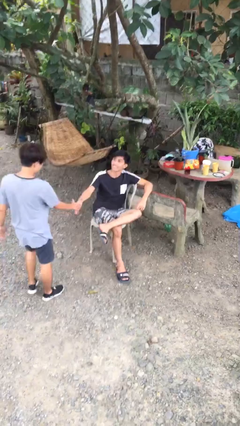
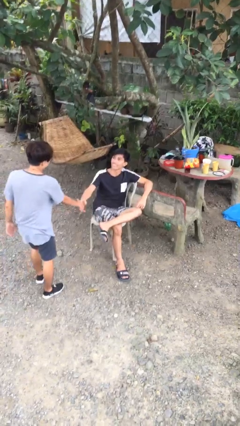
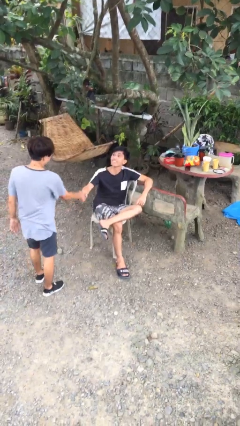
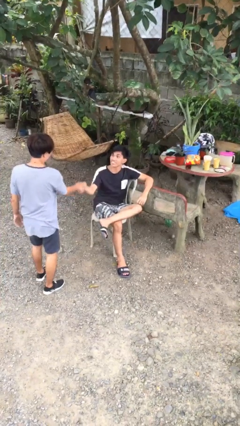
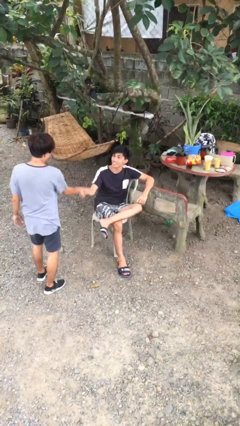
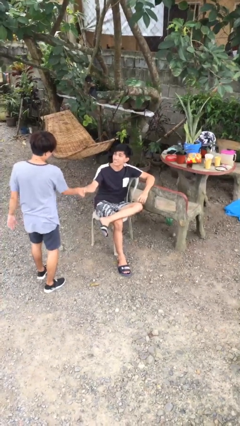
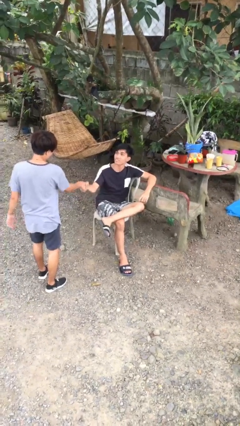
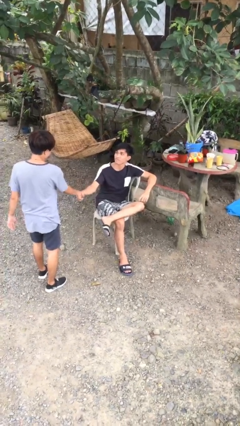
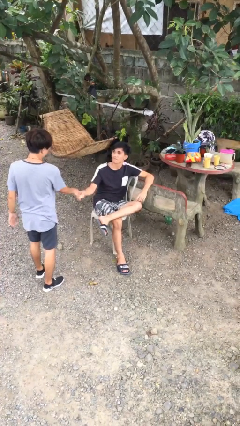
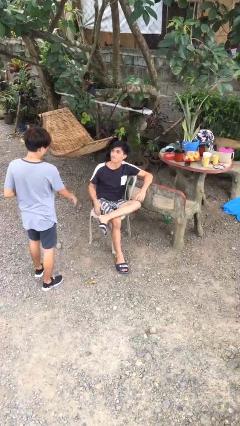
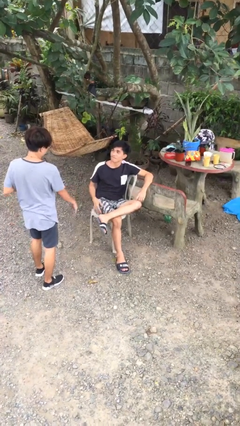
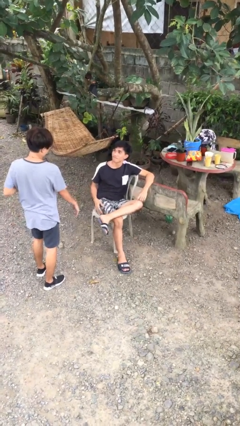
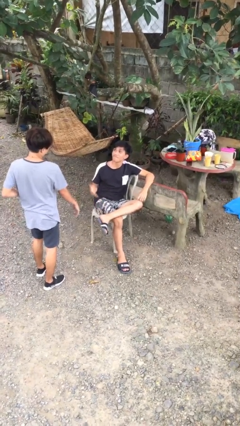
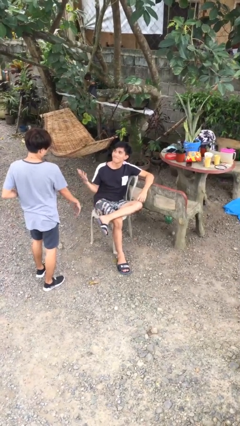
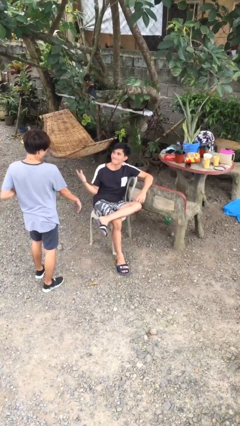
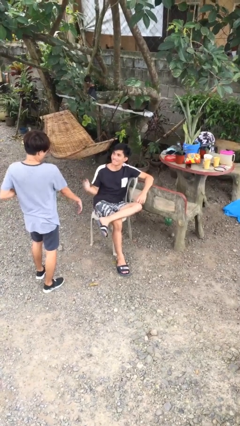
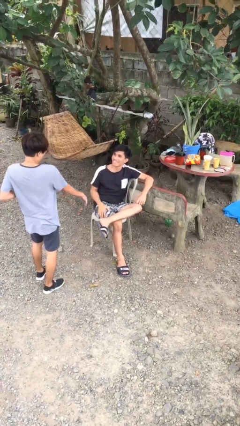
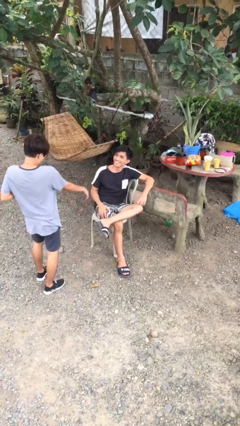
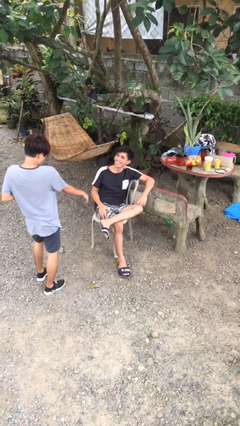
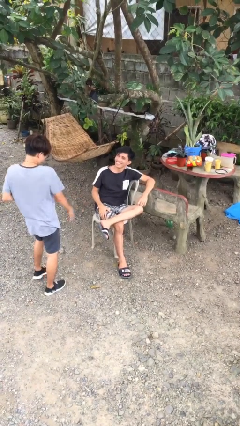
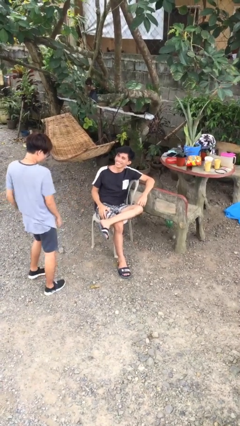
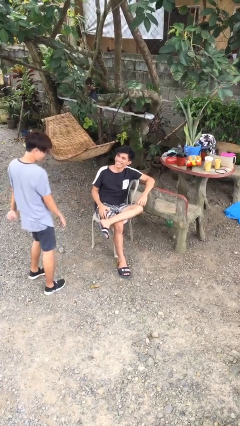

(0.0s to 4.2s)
person shakes hand

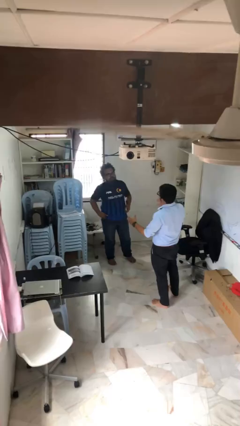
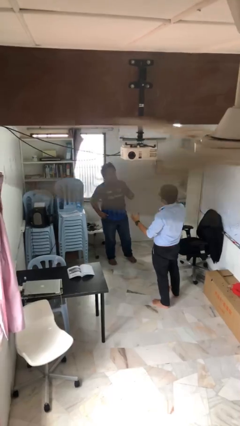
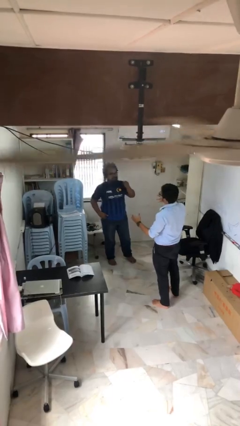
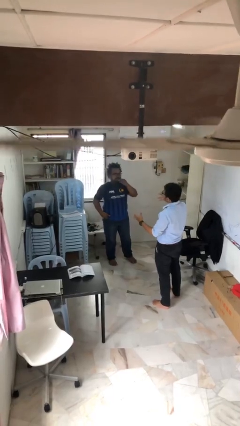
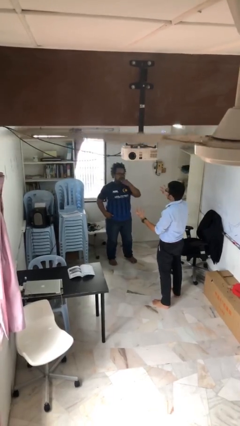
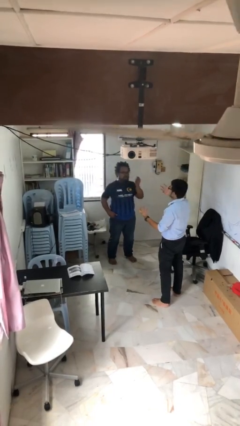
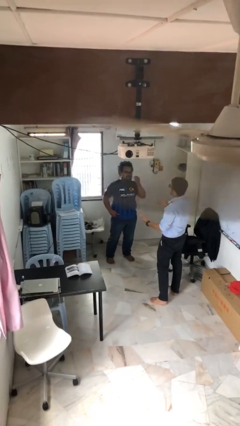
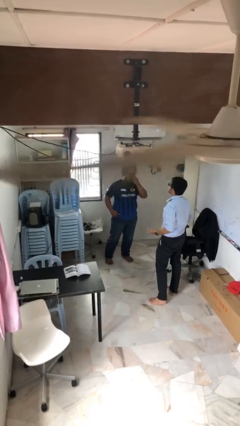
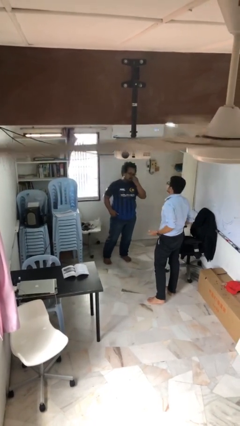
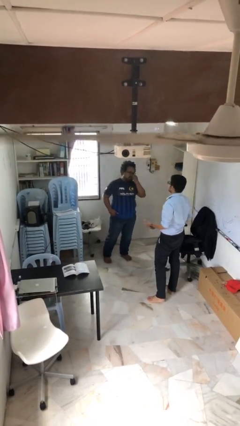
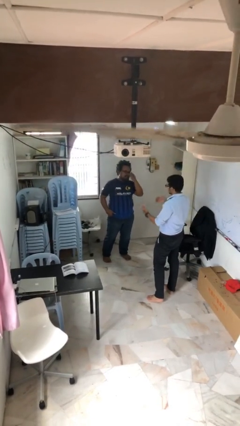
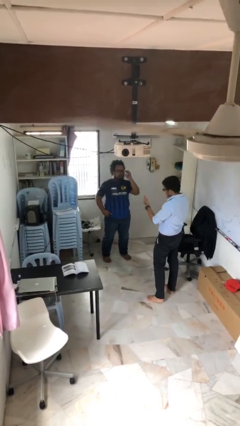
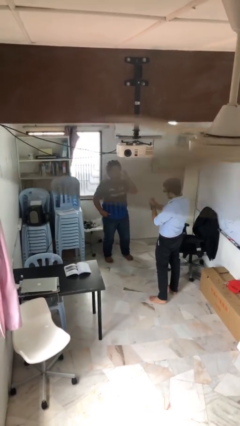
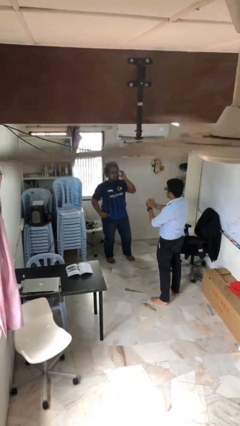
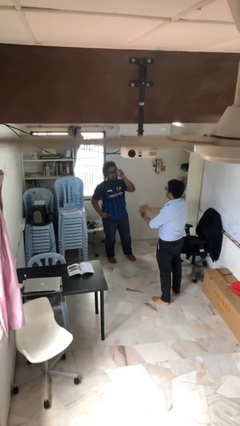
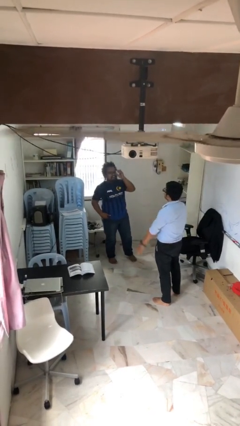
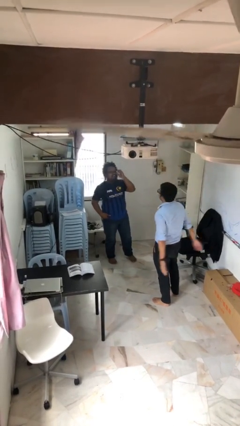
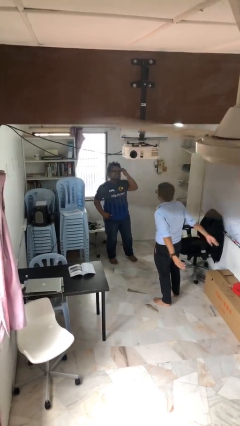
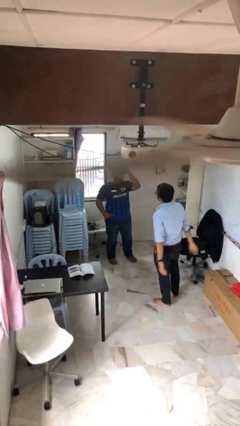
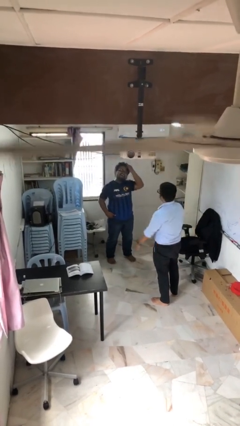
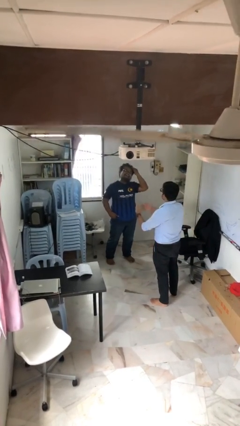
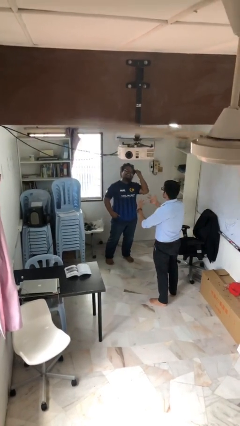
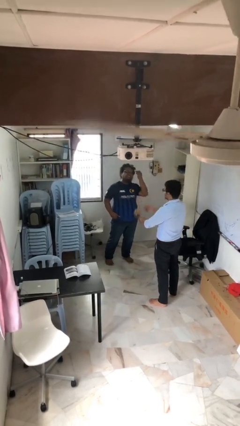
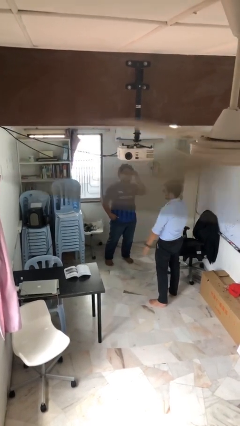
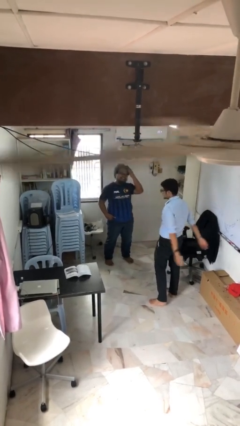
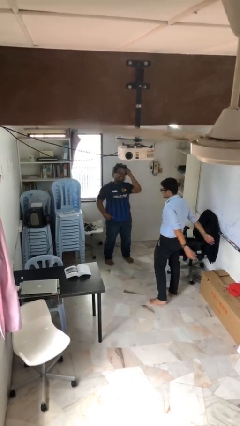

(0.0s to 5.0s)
person talks to person

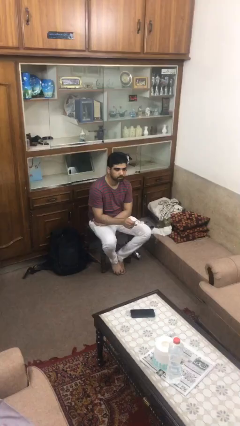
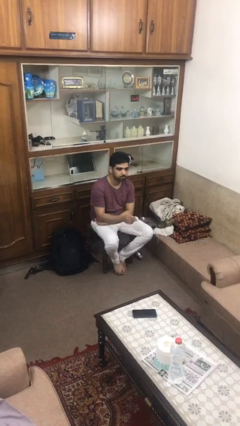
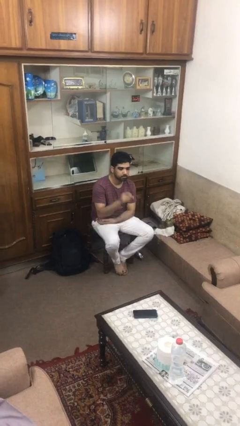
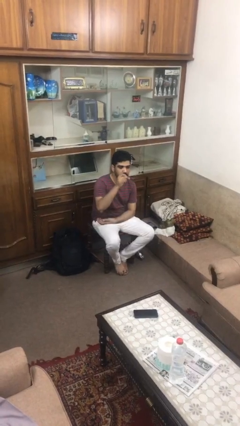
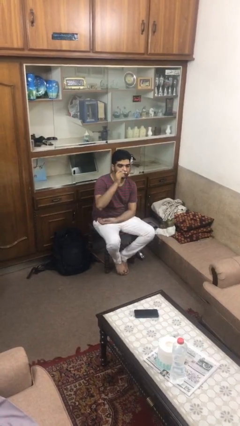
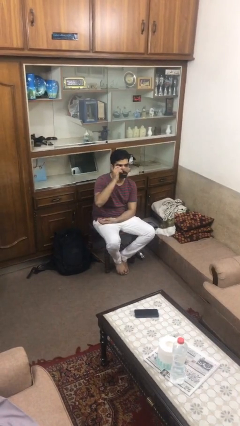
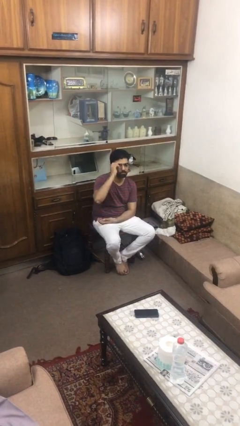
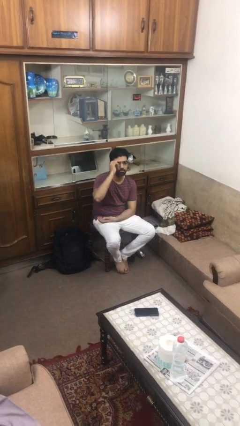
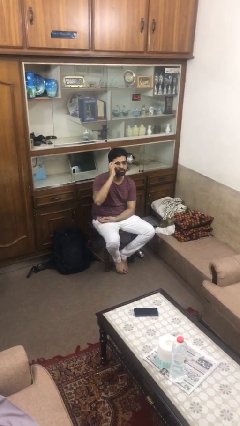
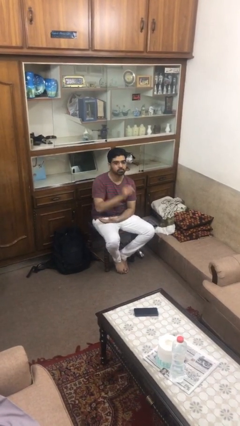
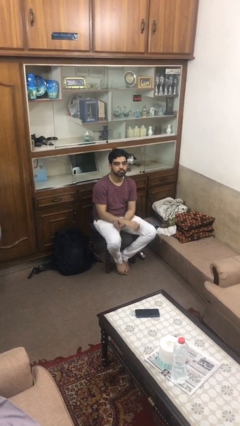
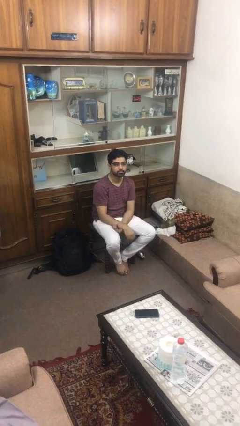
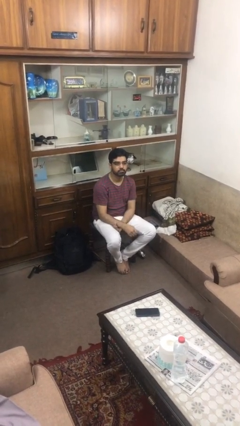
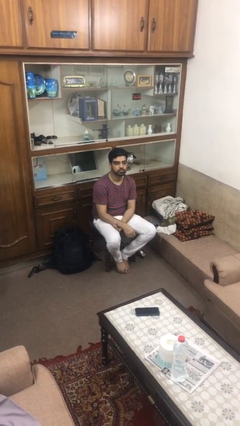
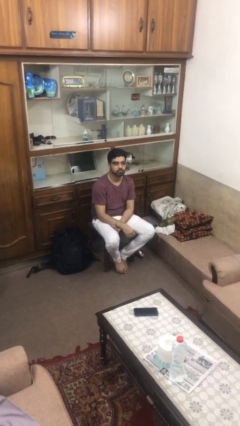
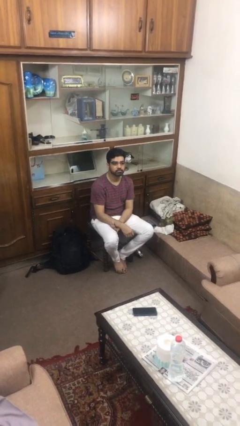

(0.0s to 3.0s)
person puts on glasses

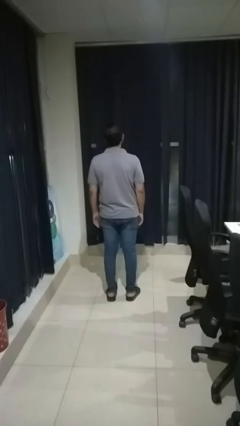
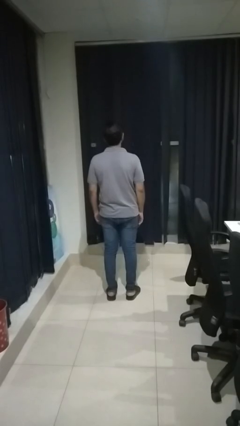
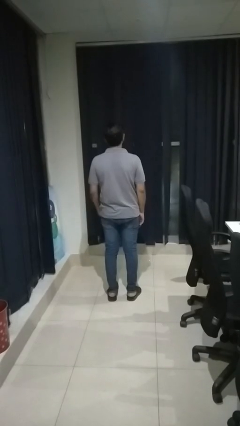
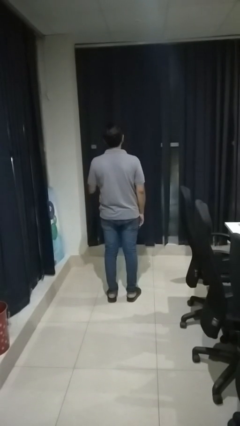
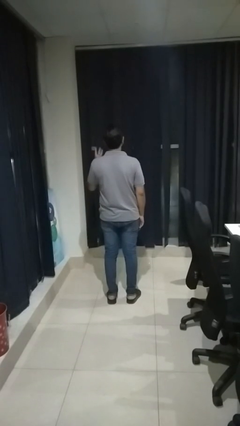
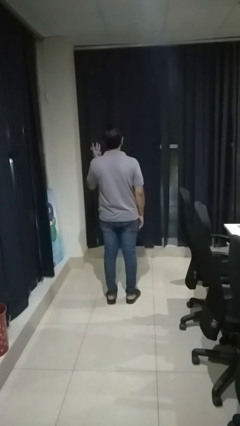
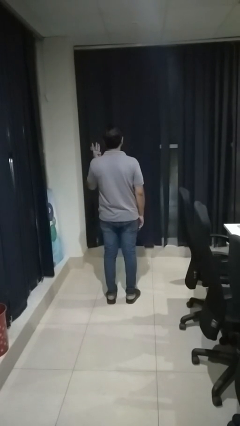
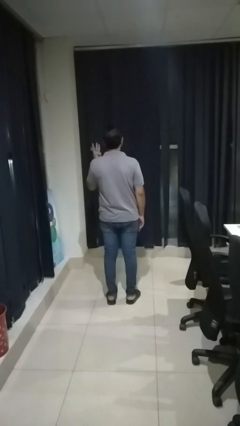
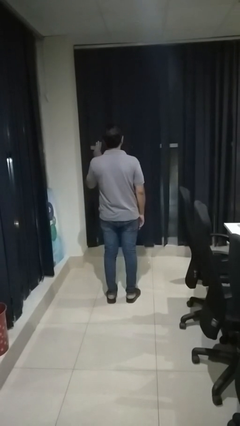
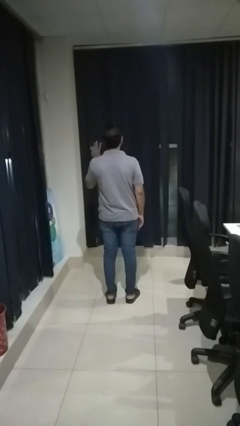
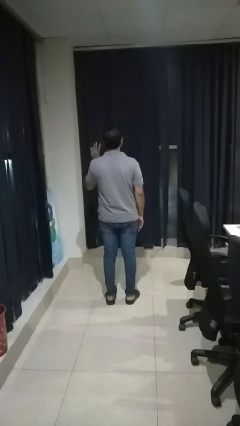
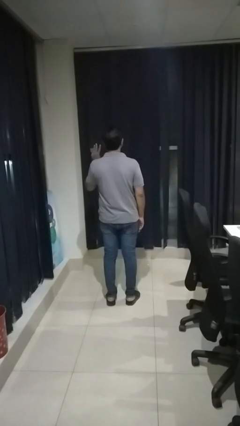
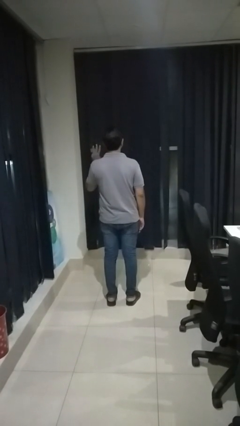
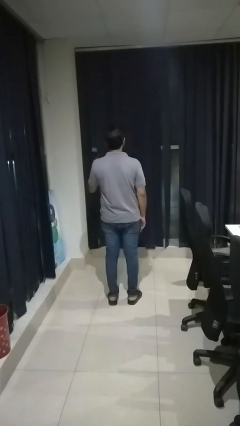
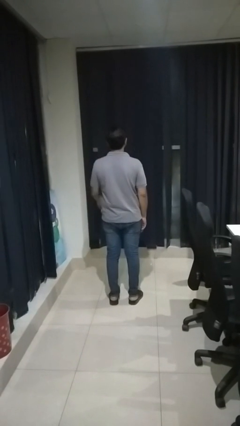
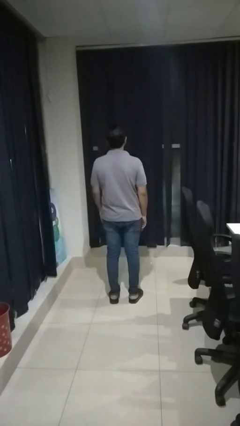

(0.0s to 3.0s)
person gestures number three

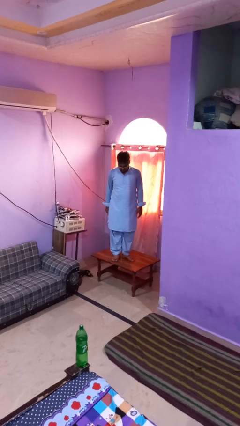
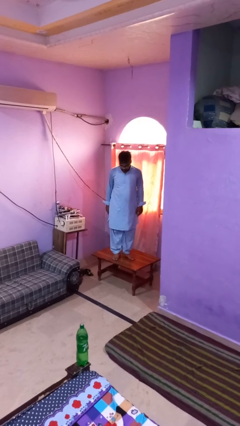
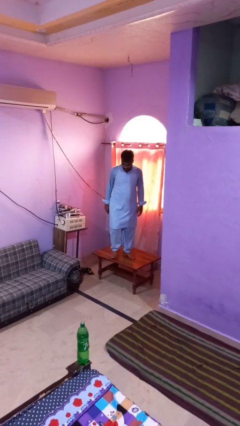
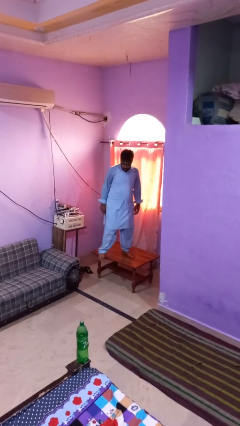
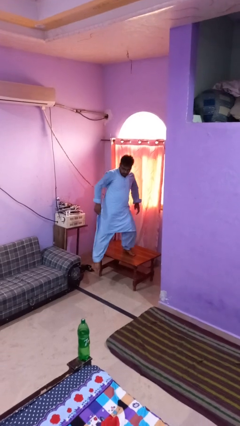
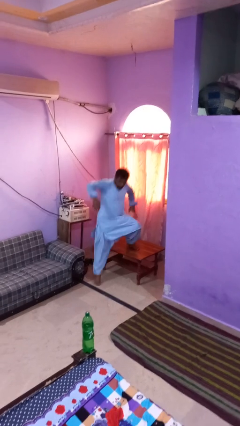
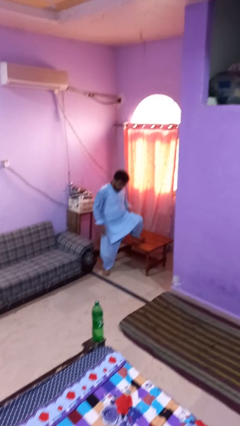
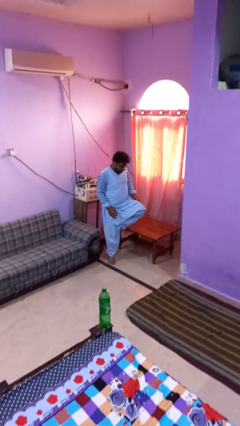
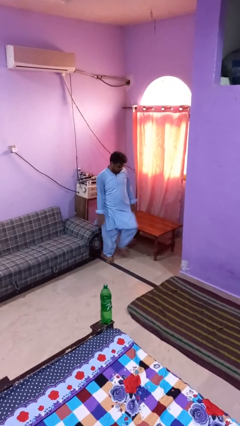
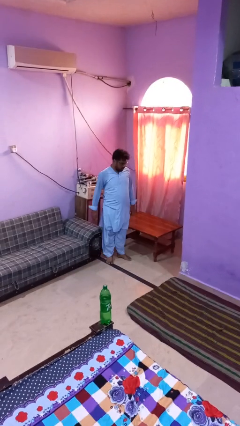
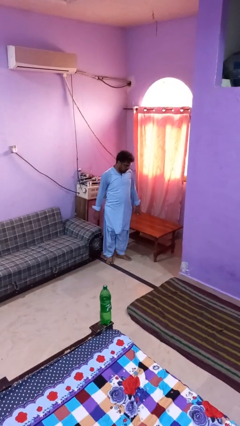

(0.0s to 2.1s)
person climbs off table

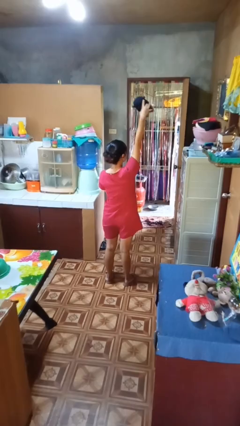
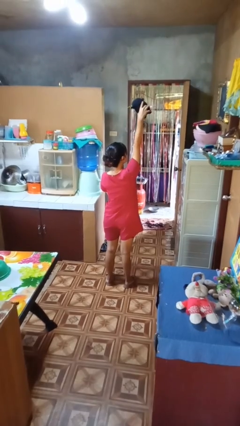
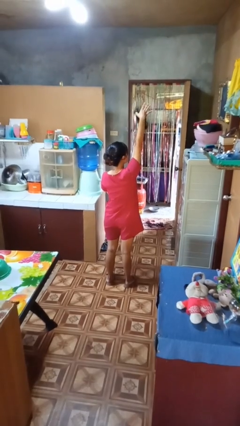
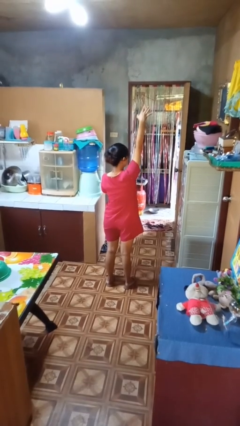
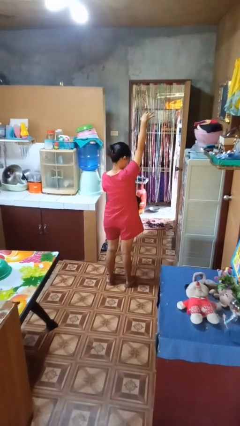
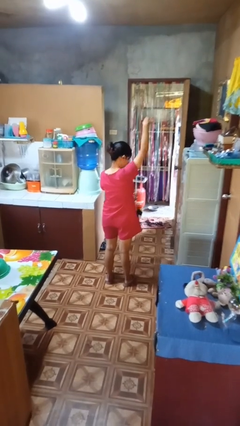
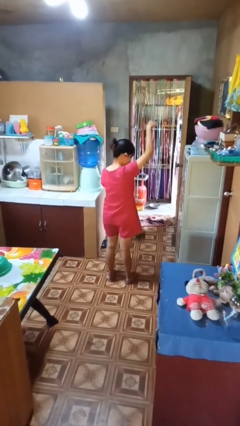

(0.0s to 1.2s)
person drops object
